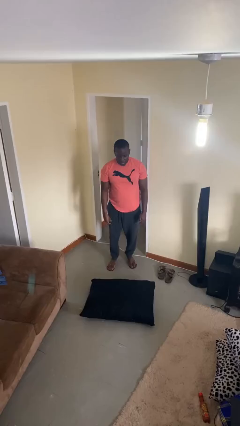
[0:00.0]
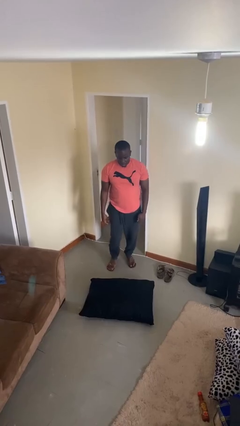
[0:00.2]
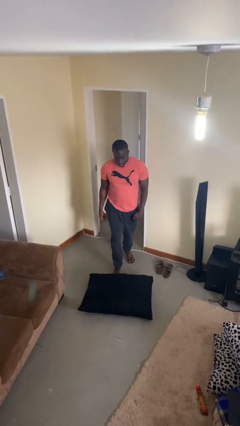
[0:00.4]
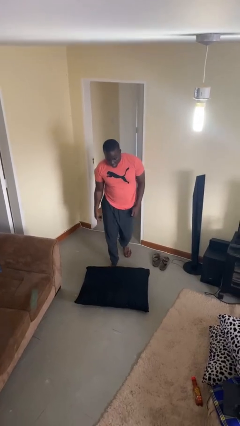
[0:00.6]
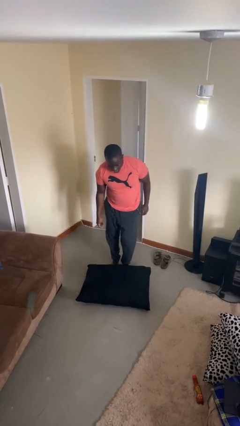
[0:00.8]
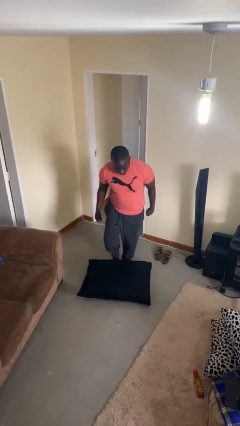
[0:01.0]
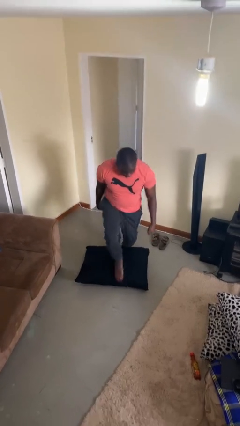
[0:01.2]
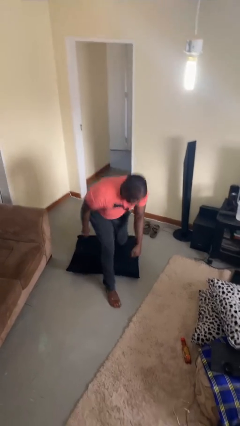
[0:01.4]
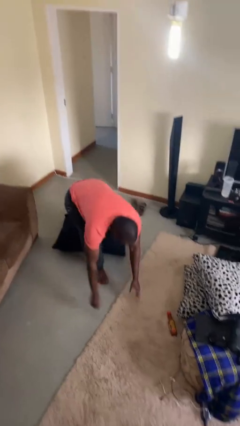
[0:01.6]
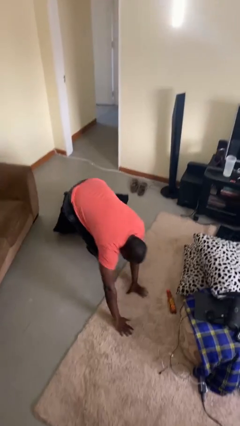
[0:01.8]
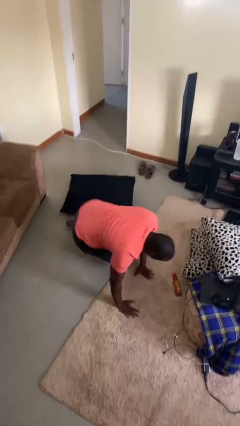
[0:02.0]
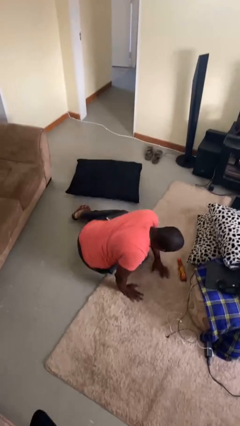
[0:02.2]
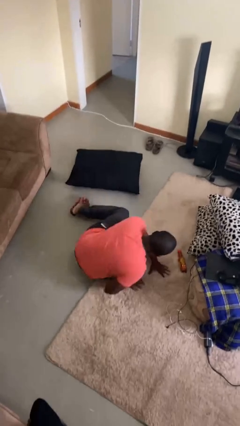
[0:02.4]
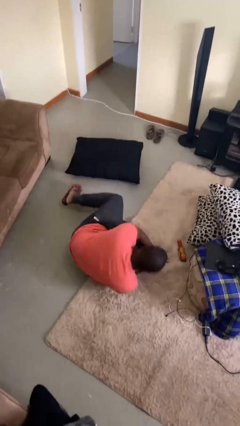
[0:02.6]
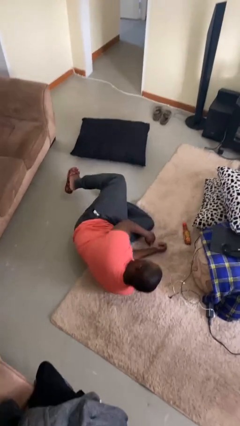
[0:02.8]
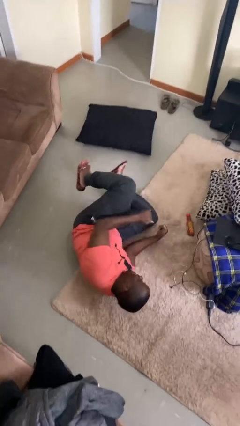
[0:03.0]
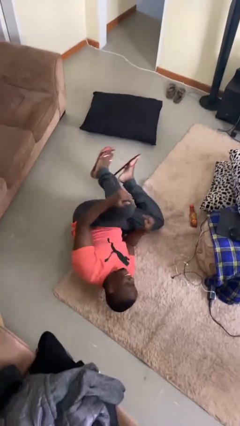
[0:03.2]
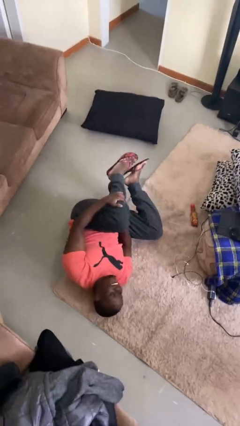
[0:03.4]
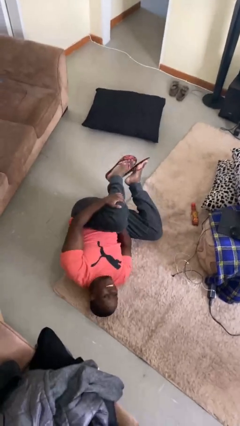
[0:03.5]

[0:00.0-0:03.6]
person trips on object on floor

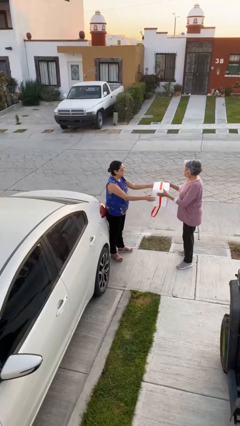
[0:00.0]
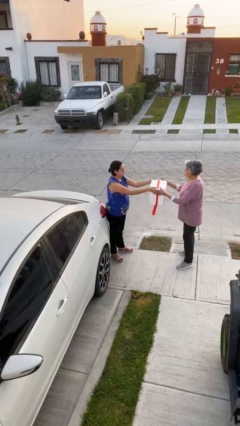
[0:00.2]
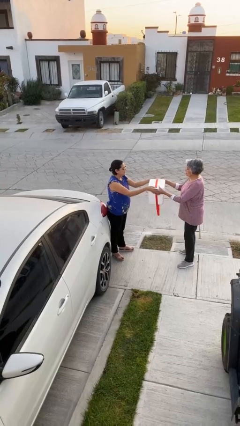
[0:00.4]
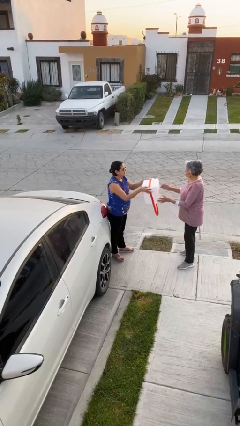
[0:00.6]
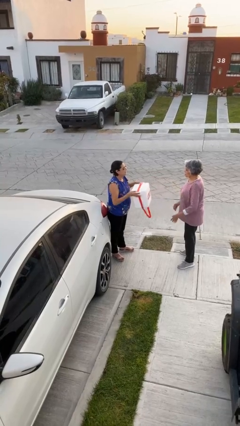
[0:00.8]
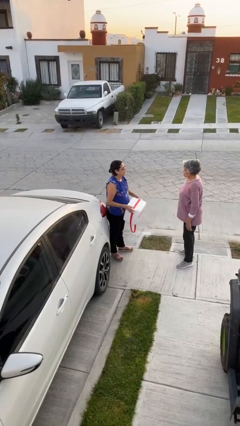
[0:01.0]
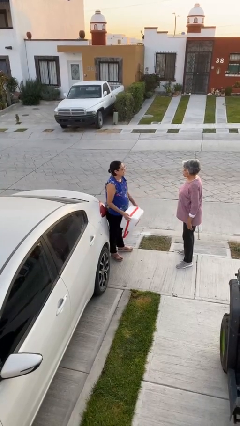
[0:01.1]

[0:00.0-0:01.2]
person transfers object to person

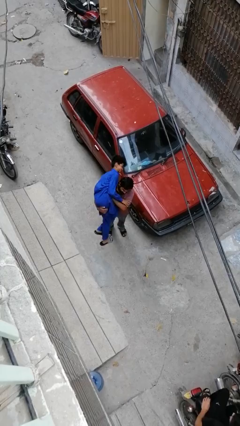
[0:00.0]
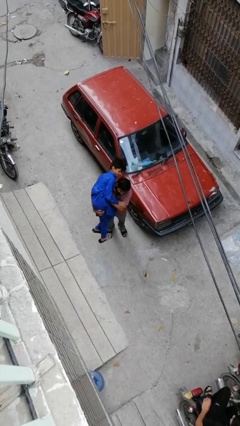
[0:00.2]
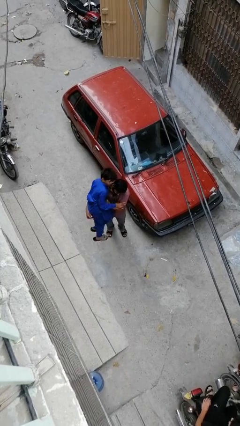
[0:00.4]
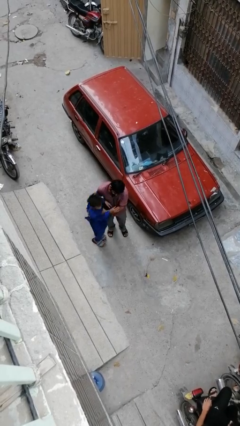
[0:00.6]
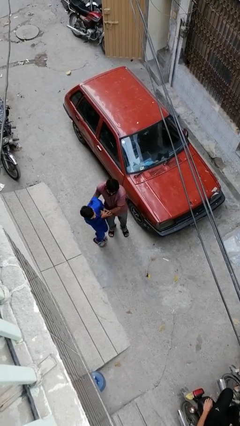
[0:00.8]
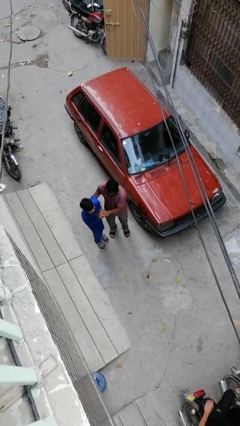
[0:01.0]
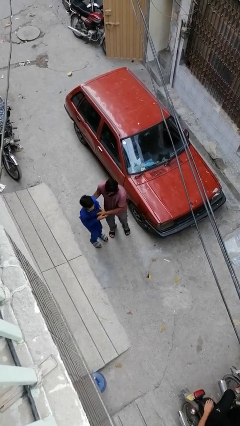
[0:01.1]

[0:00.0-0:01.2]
person puts down person

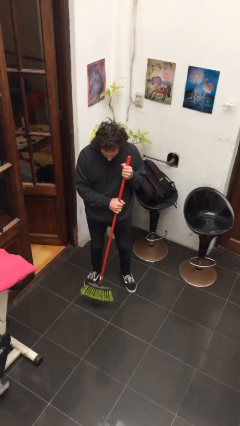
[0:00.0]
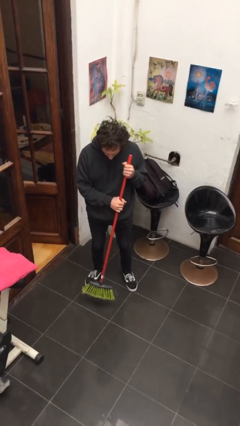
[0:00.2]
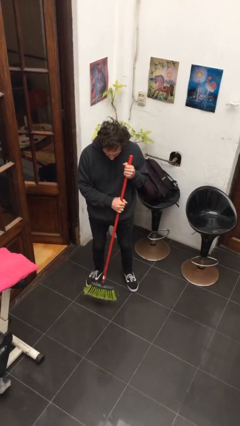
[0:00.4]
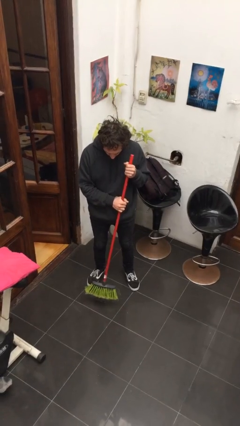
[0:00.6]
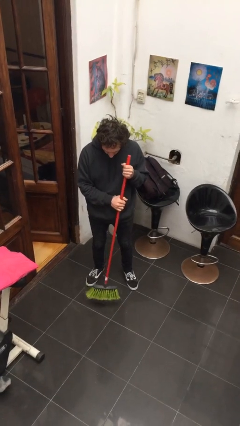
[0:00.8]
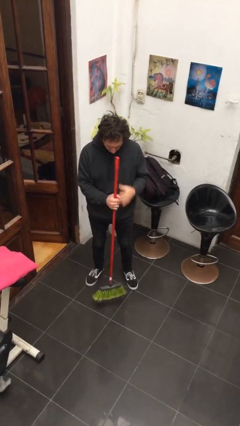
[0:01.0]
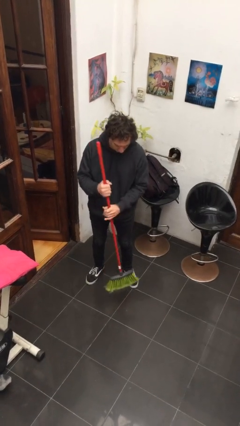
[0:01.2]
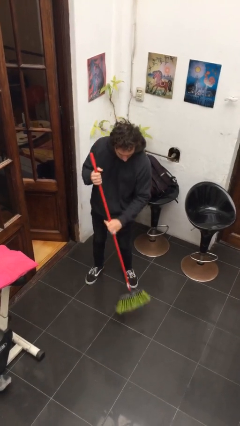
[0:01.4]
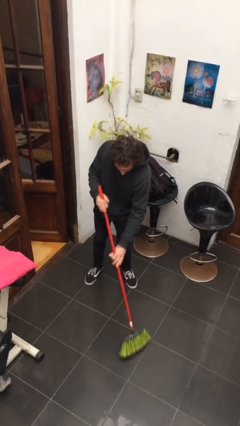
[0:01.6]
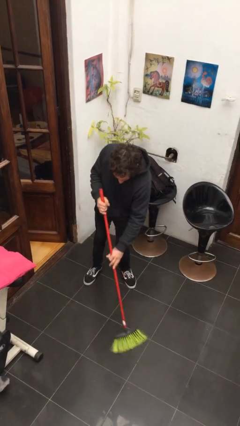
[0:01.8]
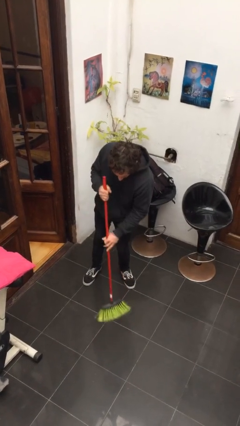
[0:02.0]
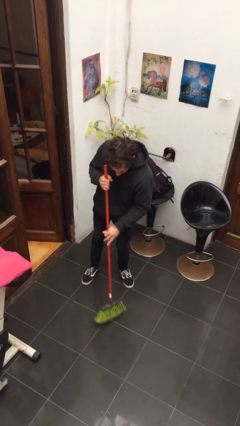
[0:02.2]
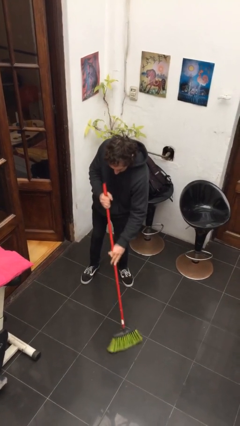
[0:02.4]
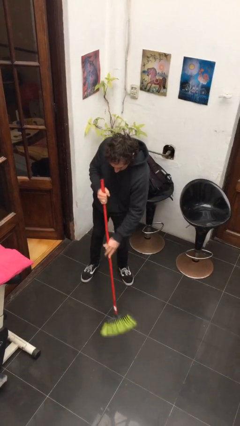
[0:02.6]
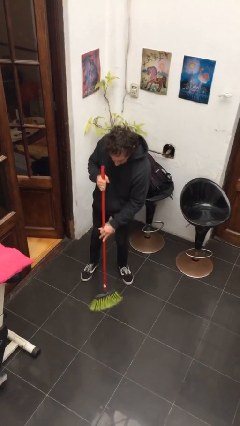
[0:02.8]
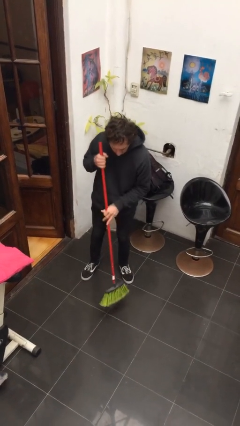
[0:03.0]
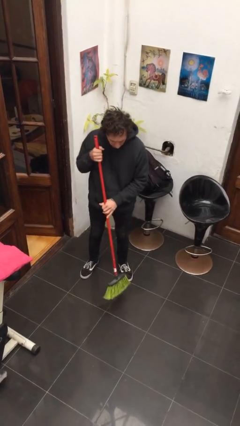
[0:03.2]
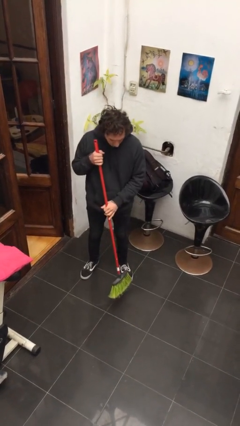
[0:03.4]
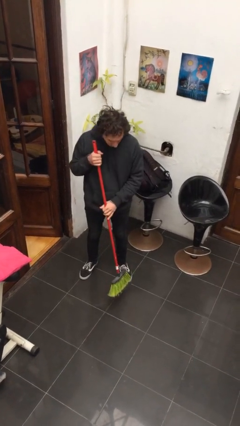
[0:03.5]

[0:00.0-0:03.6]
person sweeps floor

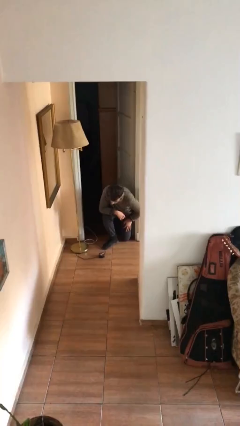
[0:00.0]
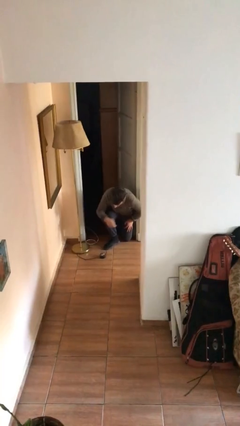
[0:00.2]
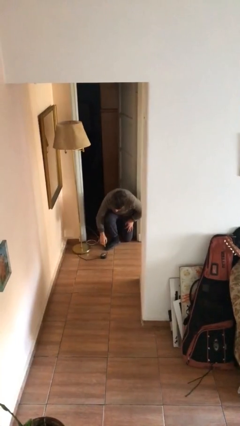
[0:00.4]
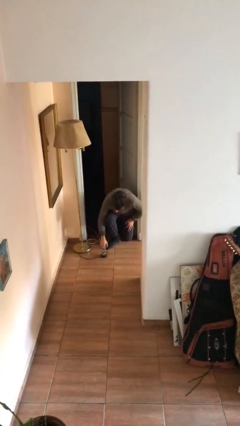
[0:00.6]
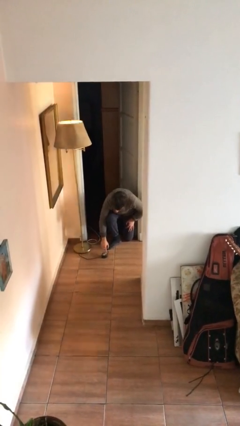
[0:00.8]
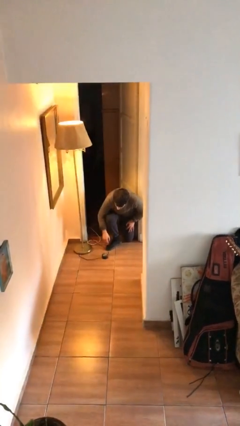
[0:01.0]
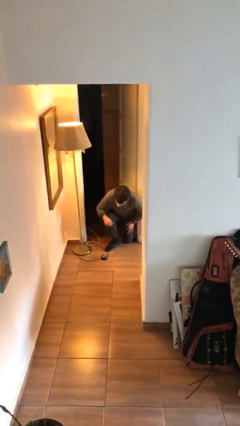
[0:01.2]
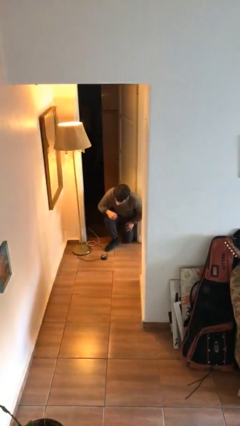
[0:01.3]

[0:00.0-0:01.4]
person turns on lamp

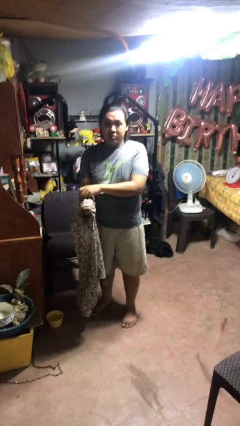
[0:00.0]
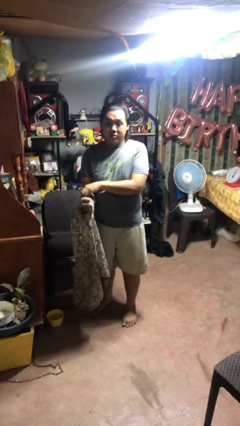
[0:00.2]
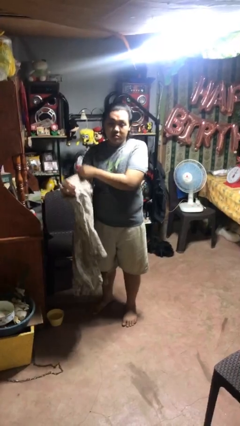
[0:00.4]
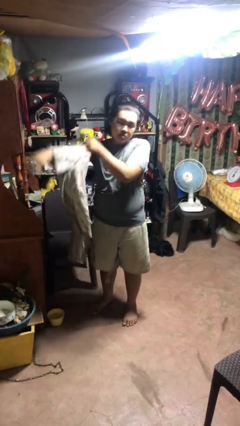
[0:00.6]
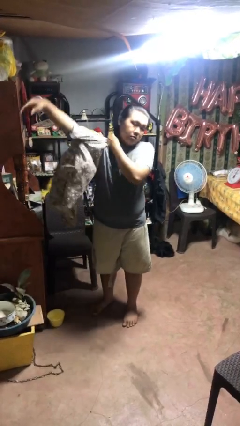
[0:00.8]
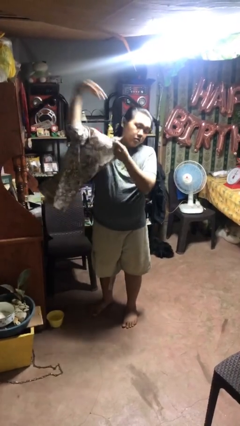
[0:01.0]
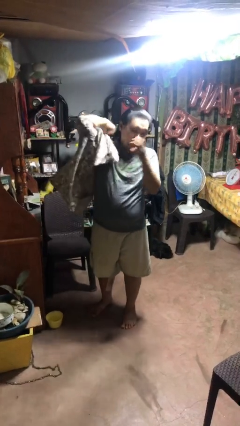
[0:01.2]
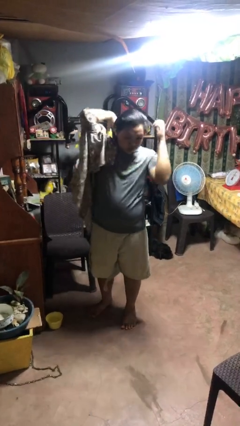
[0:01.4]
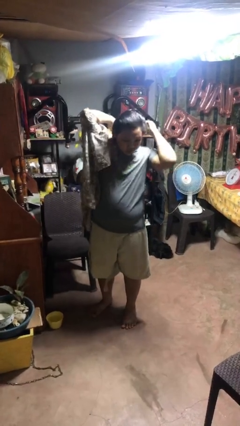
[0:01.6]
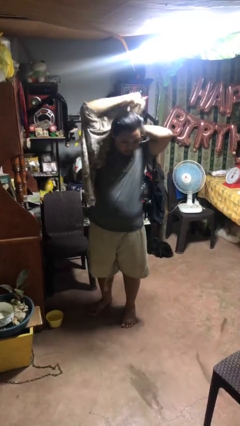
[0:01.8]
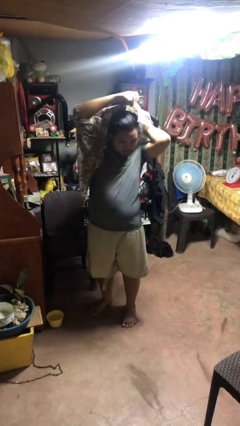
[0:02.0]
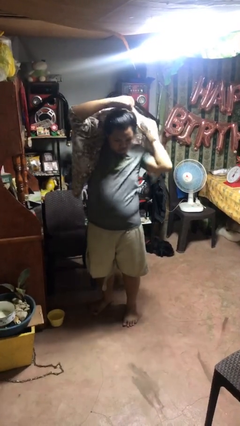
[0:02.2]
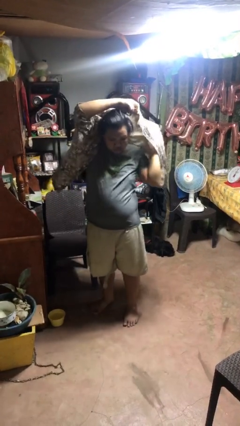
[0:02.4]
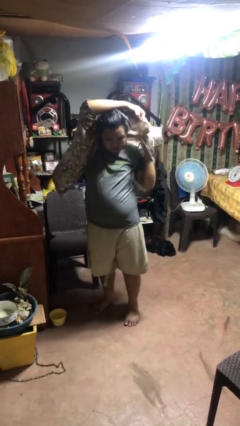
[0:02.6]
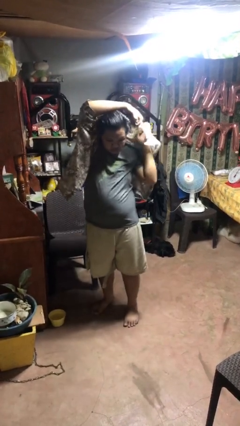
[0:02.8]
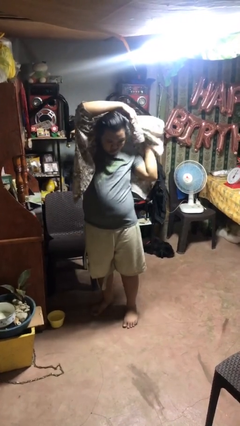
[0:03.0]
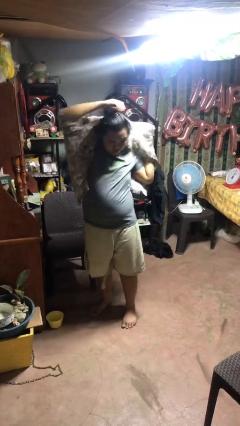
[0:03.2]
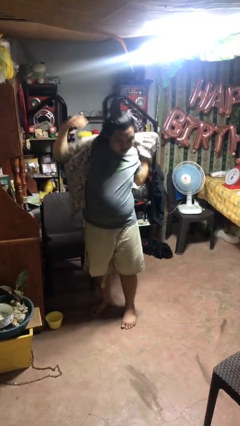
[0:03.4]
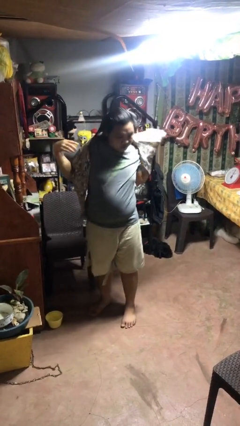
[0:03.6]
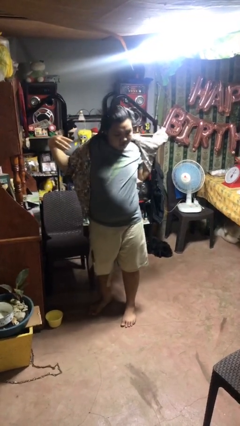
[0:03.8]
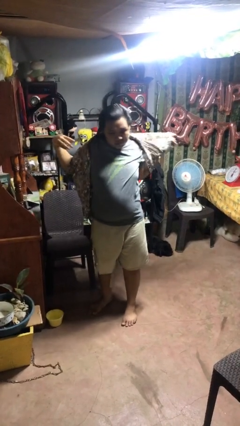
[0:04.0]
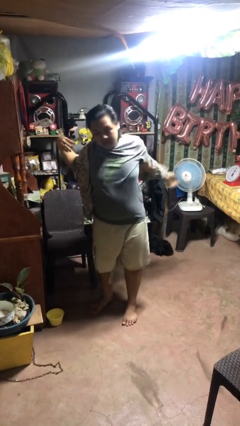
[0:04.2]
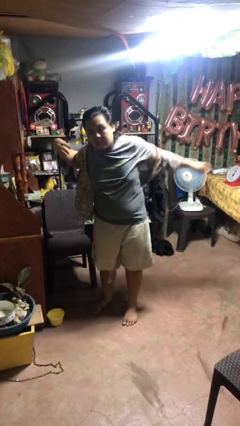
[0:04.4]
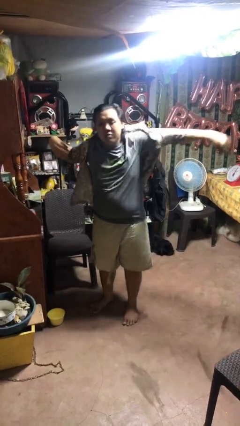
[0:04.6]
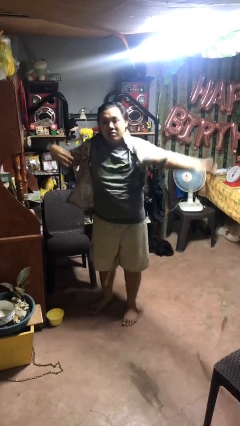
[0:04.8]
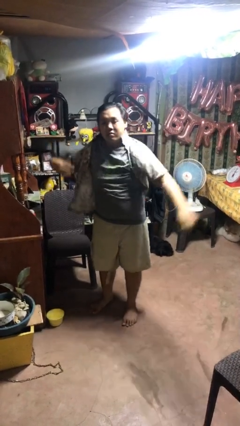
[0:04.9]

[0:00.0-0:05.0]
person puts on shirt

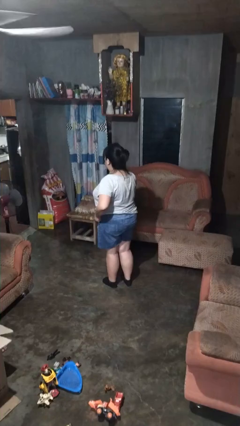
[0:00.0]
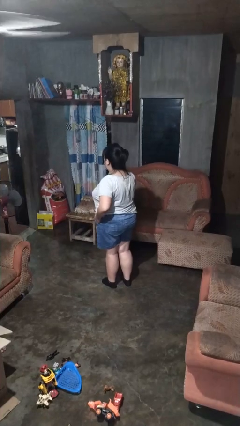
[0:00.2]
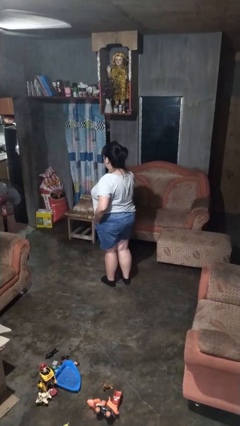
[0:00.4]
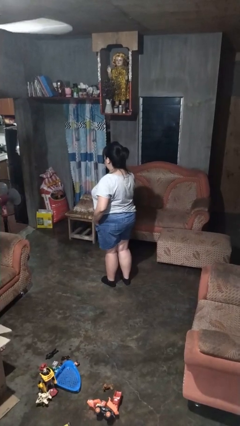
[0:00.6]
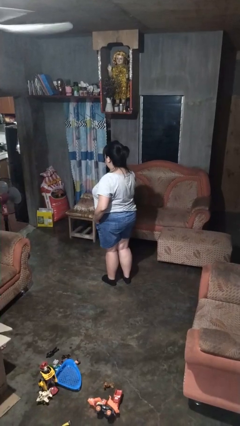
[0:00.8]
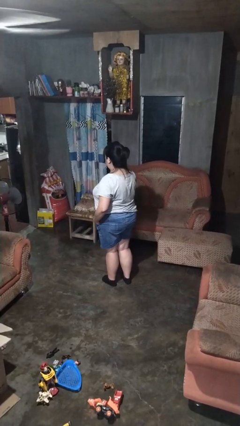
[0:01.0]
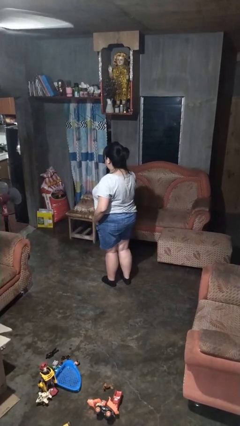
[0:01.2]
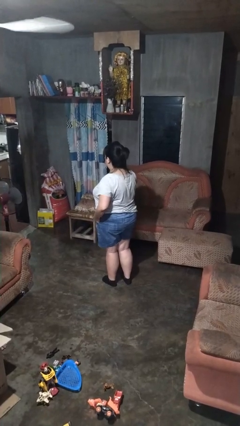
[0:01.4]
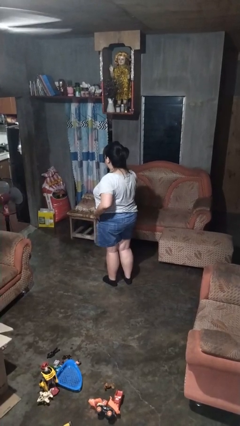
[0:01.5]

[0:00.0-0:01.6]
person puts hands in back pockets
